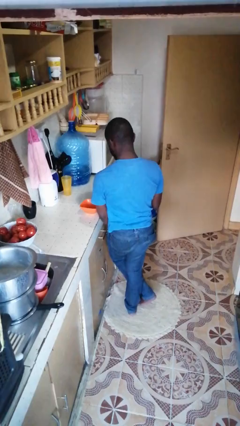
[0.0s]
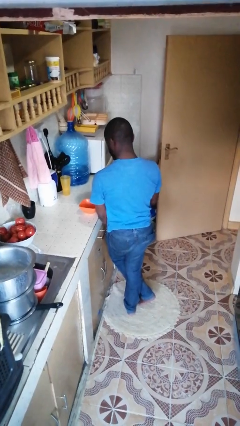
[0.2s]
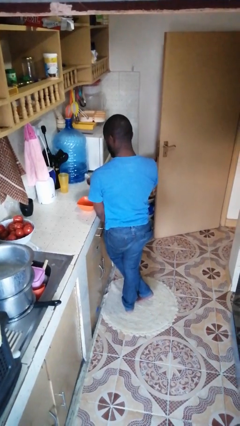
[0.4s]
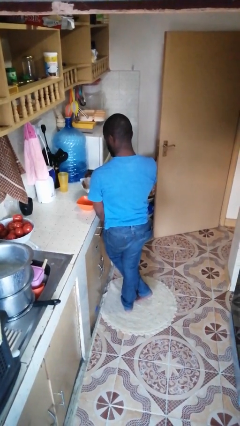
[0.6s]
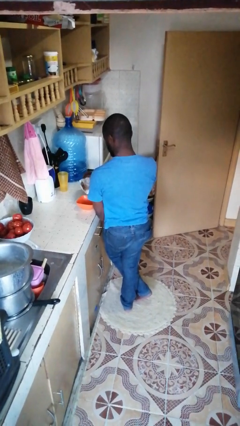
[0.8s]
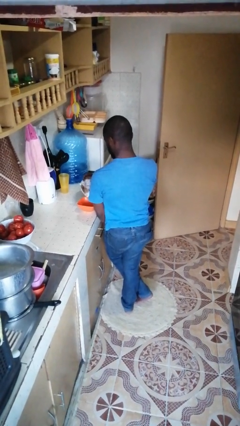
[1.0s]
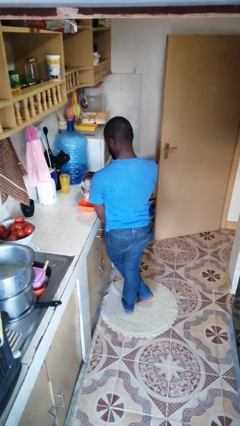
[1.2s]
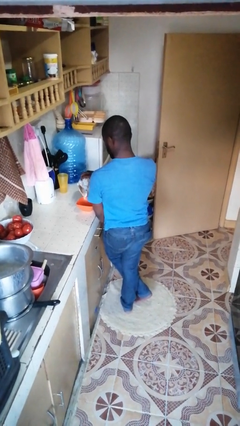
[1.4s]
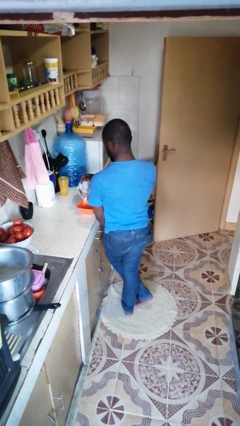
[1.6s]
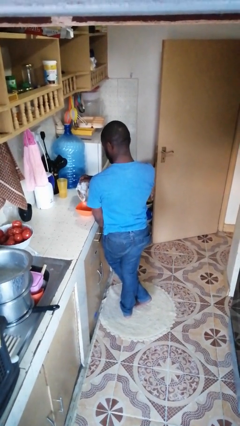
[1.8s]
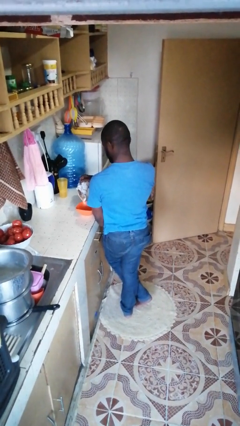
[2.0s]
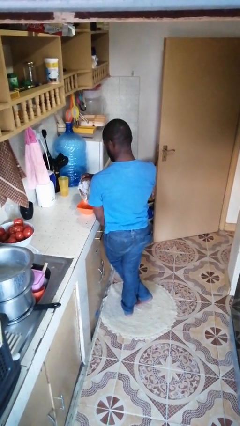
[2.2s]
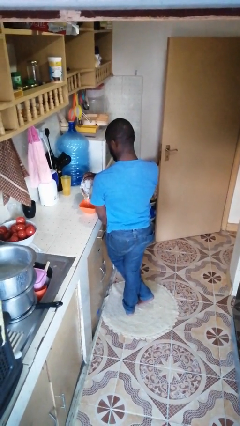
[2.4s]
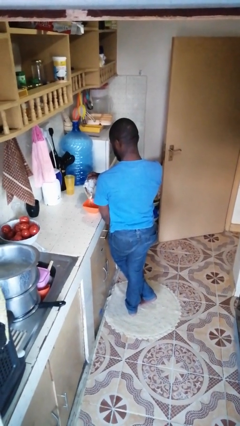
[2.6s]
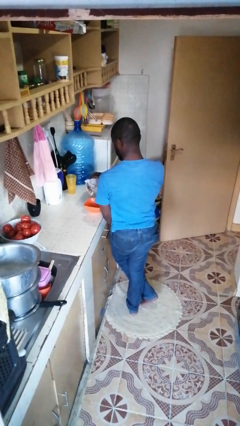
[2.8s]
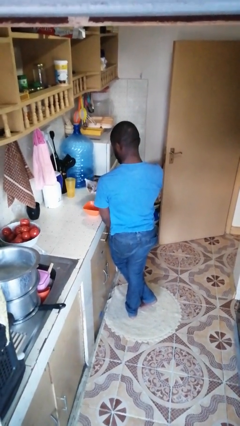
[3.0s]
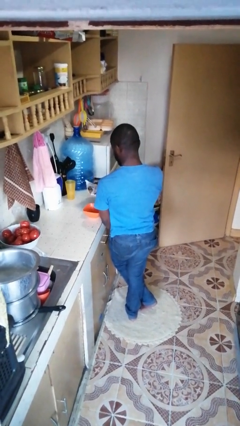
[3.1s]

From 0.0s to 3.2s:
person pours into bowl

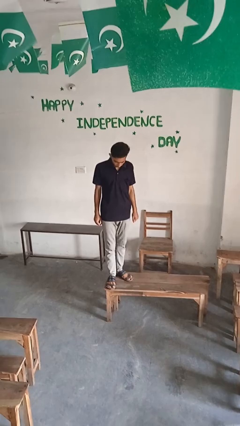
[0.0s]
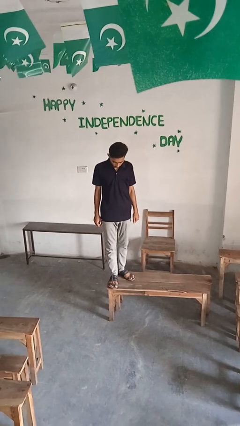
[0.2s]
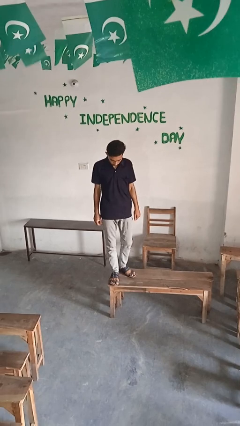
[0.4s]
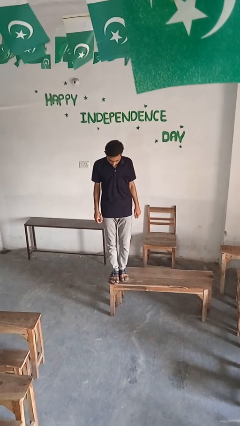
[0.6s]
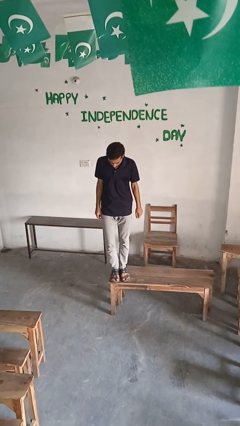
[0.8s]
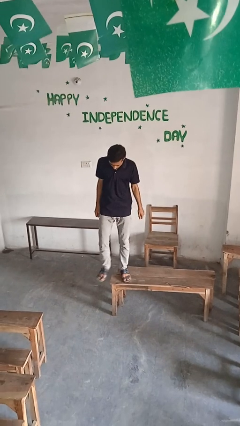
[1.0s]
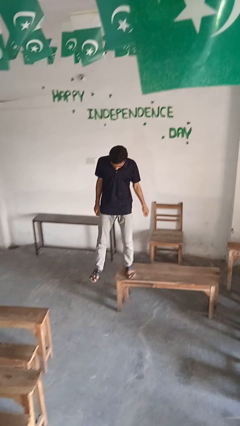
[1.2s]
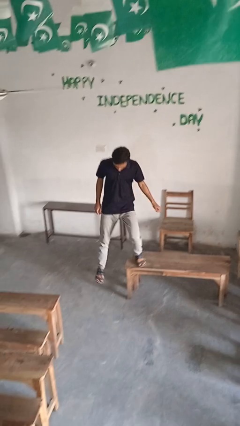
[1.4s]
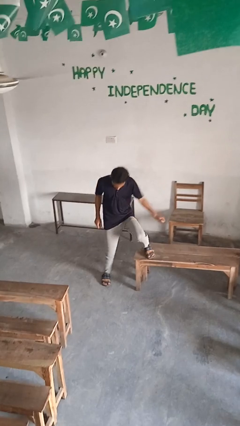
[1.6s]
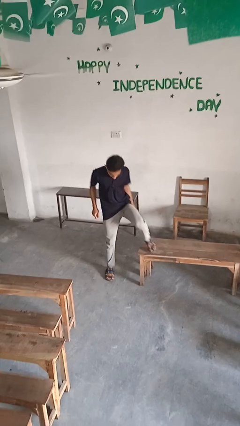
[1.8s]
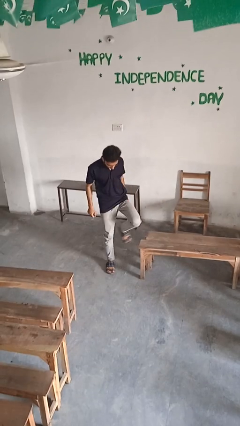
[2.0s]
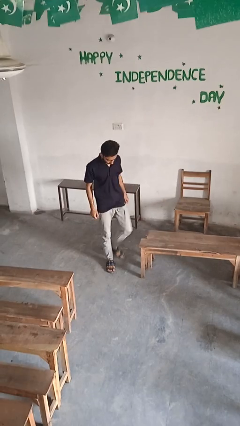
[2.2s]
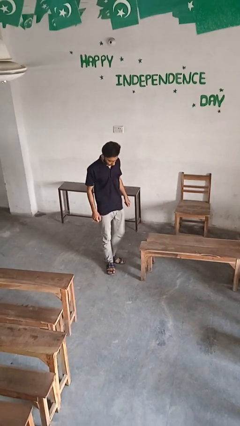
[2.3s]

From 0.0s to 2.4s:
person climbs off table

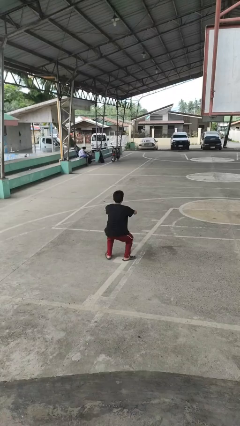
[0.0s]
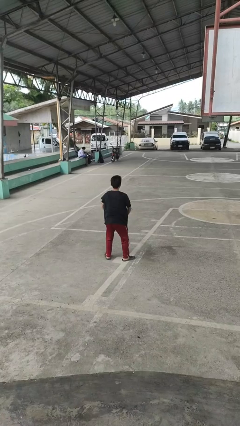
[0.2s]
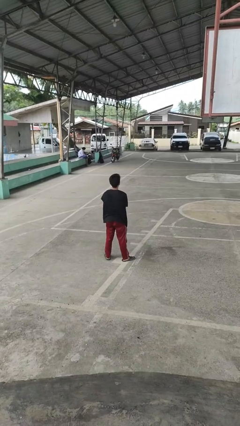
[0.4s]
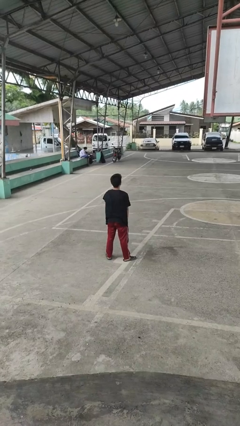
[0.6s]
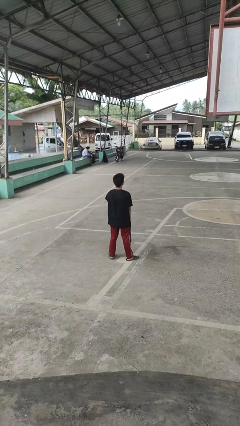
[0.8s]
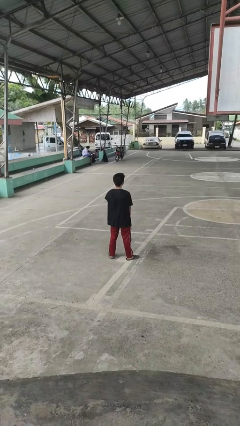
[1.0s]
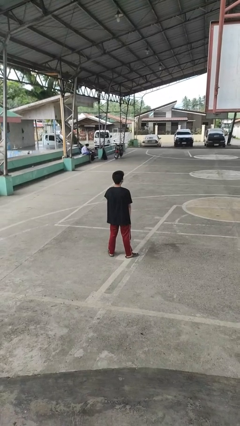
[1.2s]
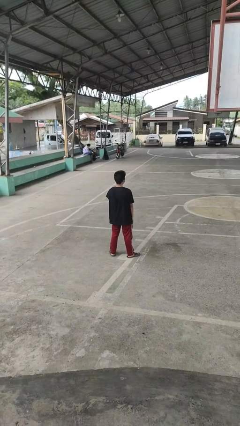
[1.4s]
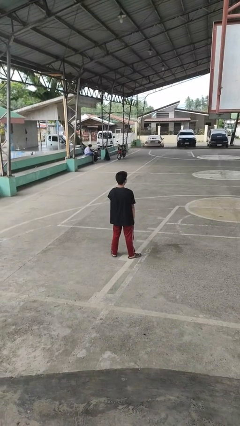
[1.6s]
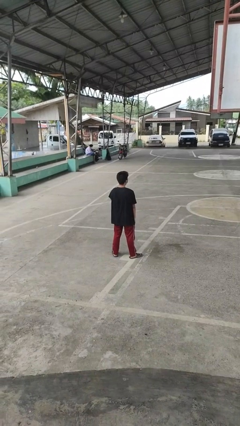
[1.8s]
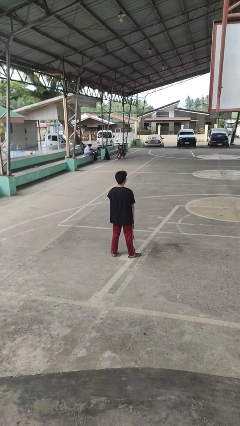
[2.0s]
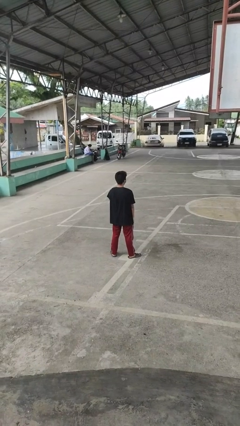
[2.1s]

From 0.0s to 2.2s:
person stands up

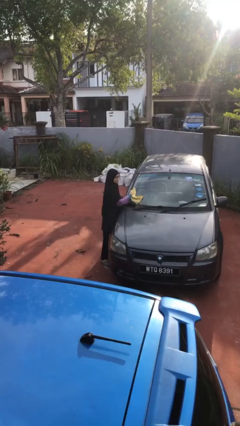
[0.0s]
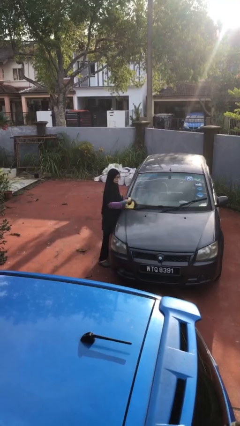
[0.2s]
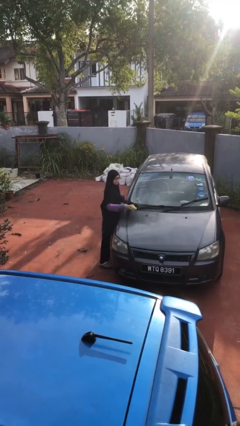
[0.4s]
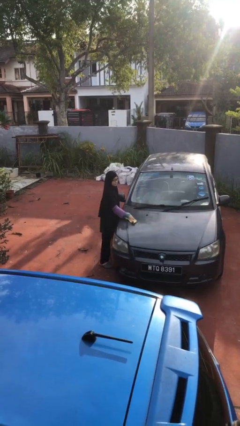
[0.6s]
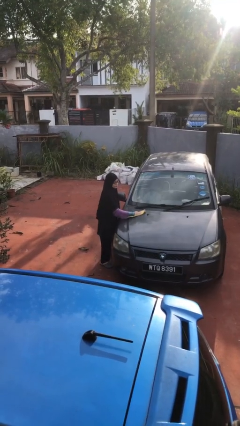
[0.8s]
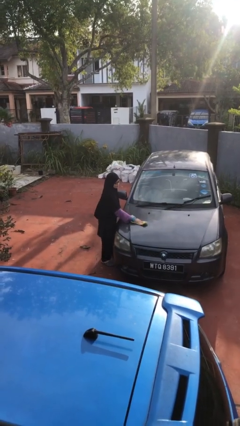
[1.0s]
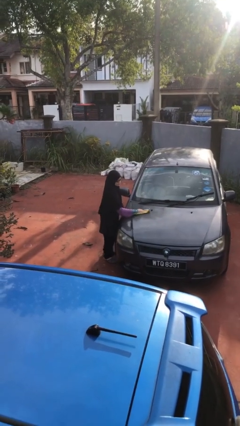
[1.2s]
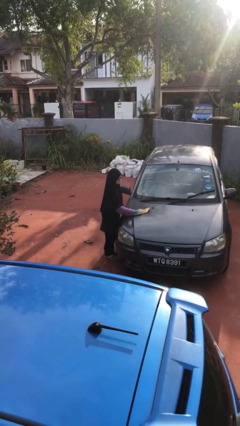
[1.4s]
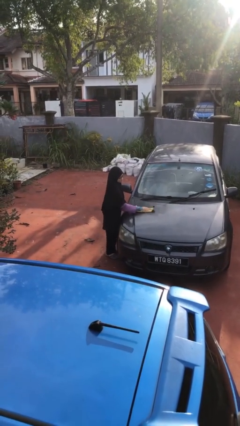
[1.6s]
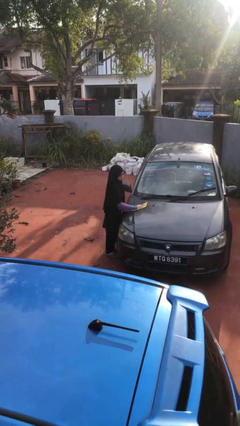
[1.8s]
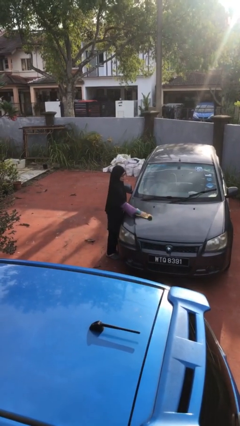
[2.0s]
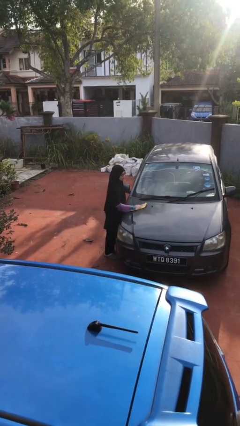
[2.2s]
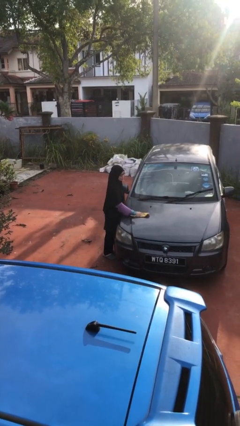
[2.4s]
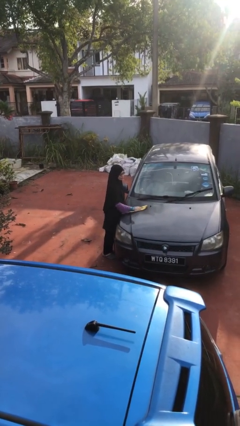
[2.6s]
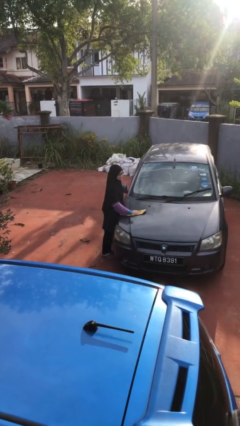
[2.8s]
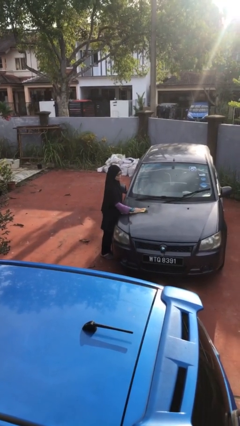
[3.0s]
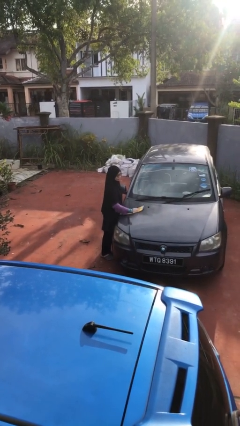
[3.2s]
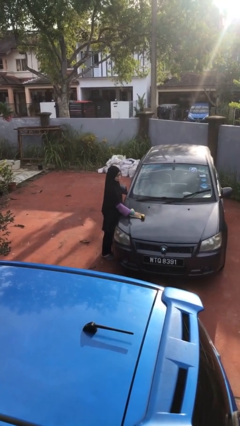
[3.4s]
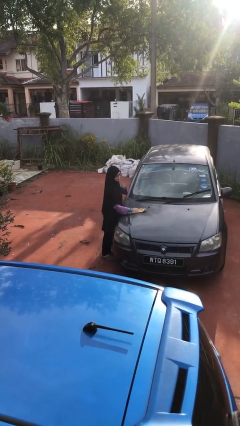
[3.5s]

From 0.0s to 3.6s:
person polishes car with rag

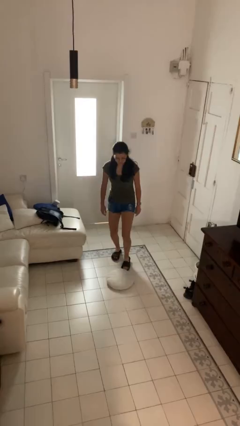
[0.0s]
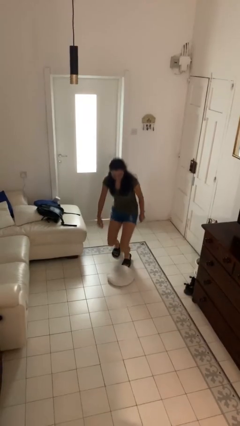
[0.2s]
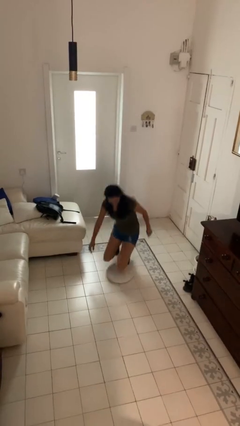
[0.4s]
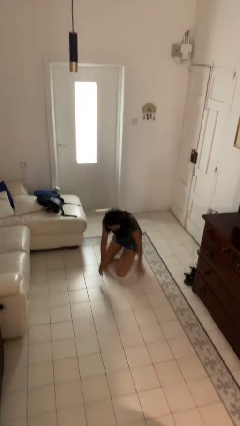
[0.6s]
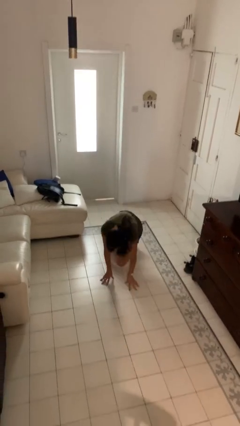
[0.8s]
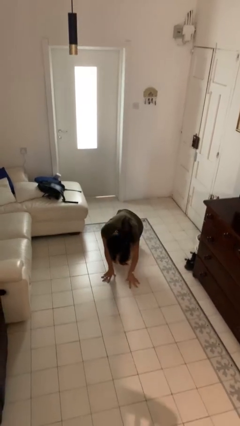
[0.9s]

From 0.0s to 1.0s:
person trips on object on floor

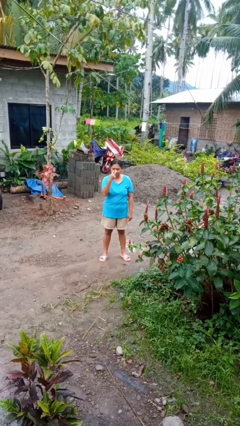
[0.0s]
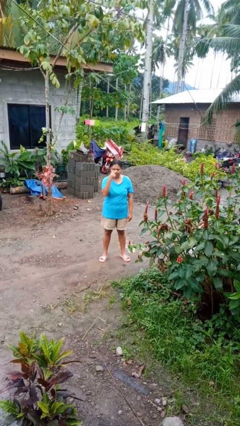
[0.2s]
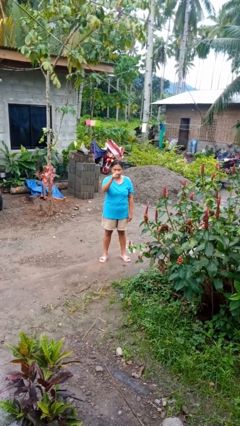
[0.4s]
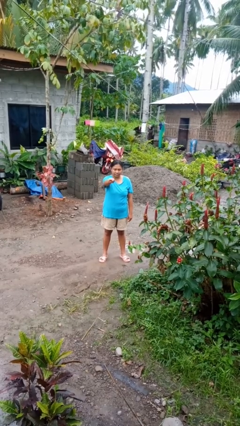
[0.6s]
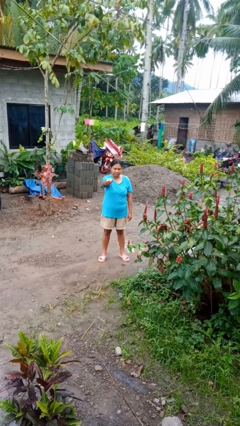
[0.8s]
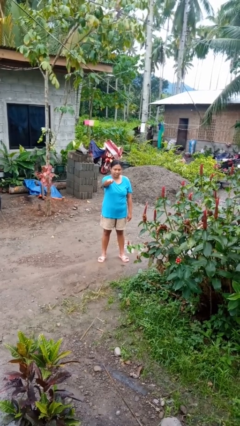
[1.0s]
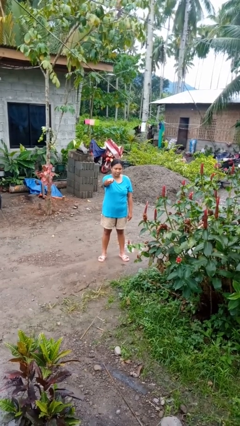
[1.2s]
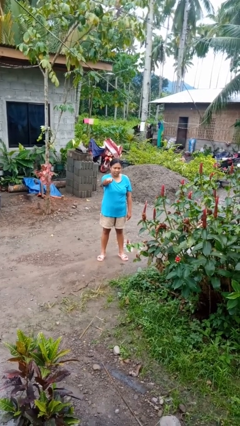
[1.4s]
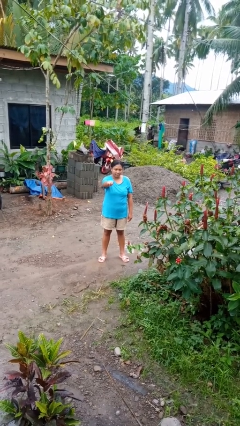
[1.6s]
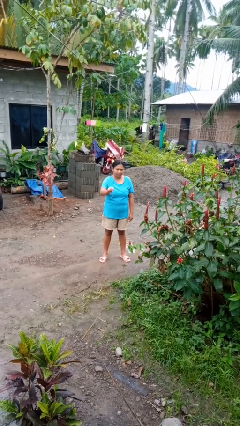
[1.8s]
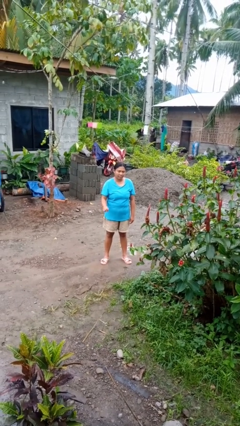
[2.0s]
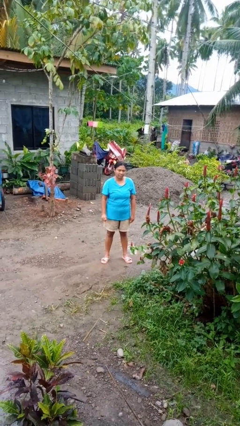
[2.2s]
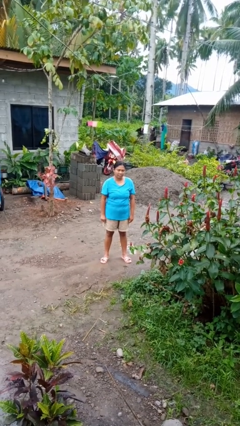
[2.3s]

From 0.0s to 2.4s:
person gestures watch closely

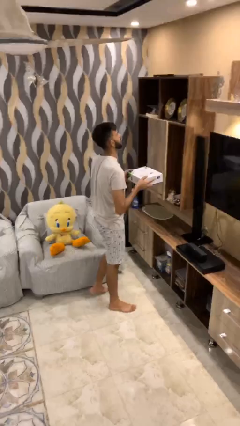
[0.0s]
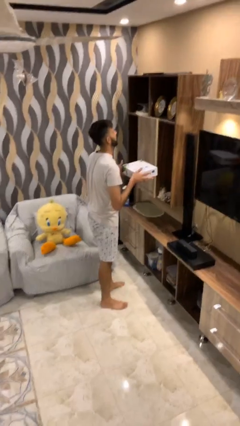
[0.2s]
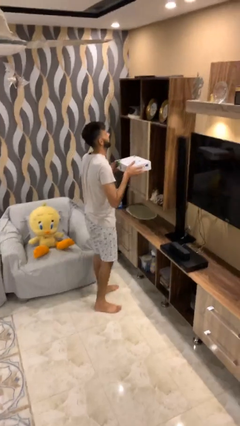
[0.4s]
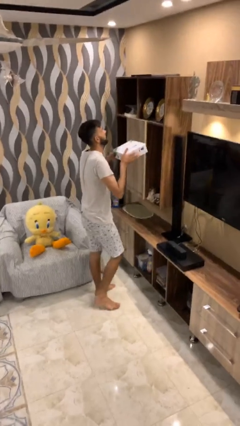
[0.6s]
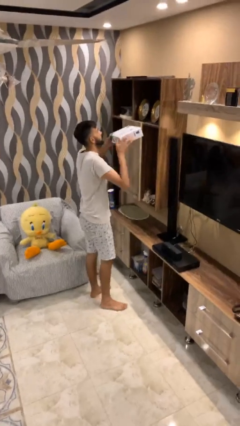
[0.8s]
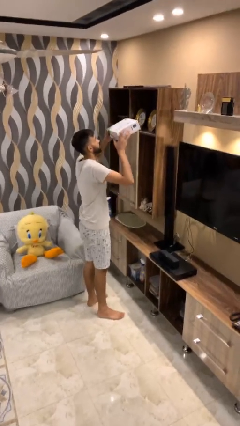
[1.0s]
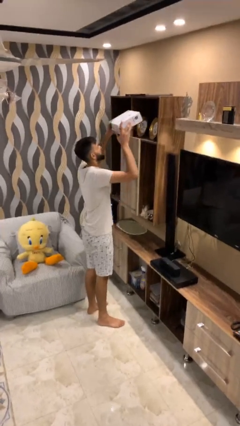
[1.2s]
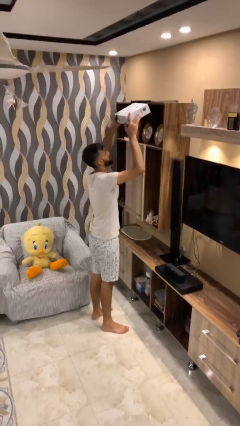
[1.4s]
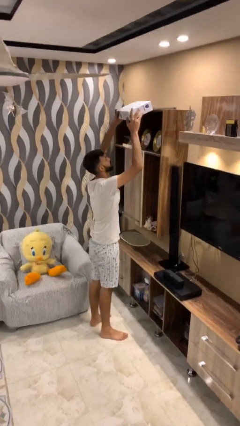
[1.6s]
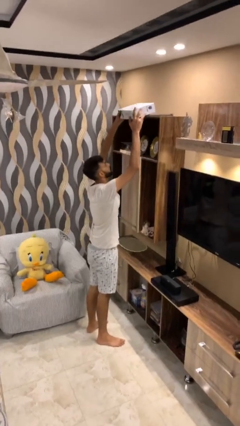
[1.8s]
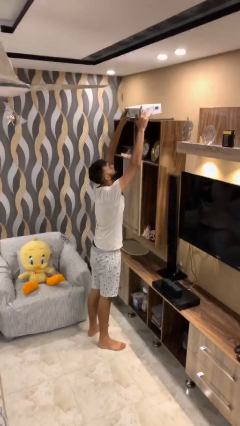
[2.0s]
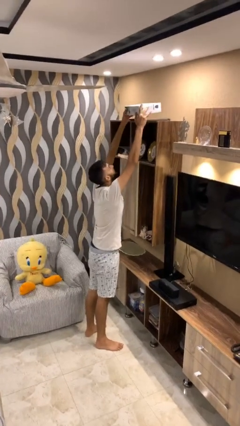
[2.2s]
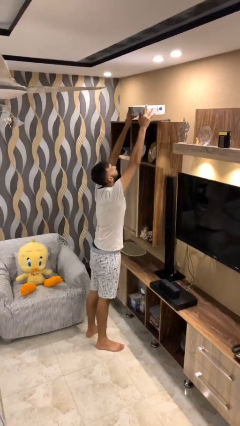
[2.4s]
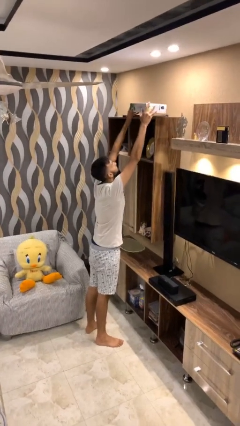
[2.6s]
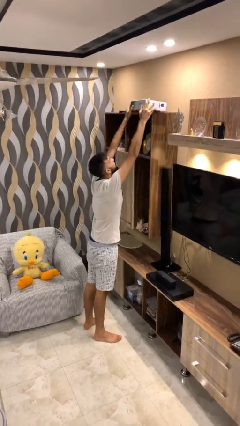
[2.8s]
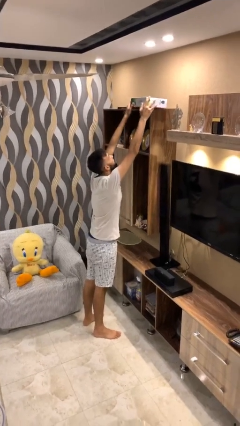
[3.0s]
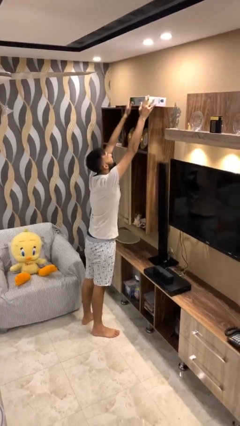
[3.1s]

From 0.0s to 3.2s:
person puts down object on shelf
